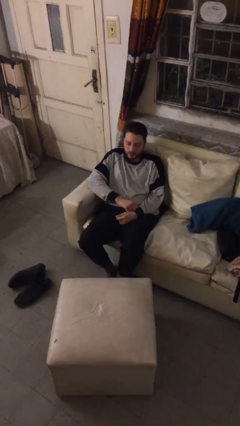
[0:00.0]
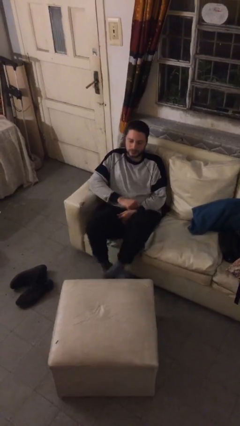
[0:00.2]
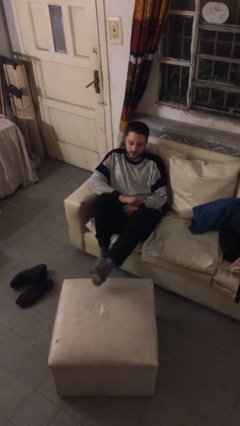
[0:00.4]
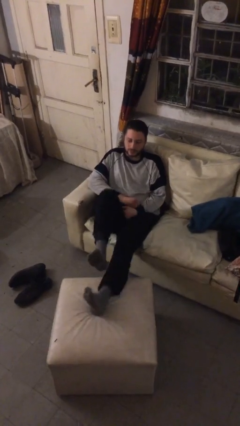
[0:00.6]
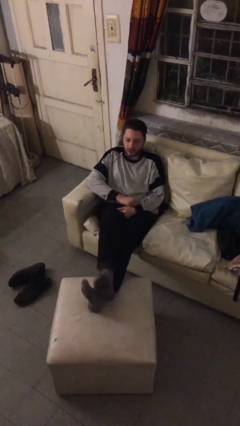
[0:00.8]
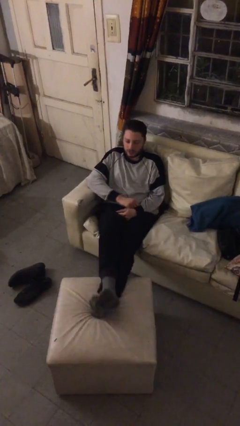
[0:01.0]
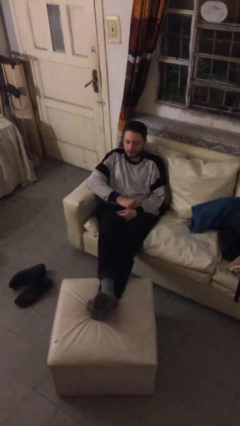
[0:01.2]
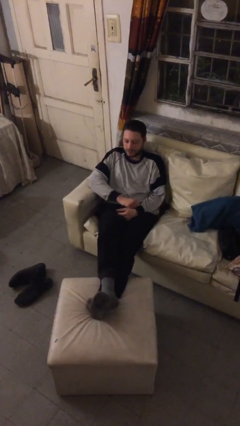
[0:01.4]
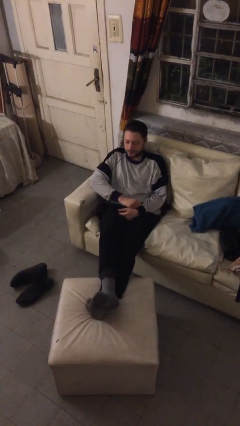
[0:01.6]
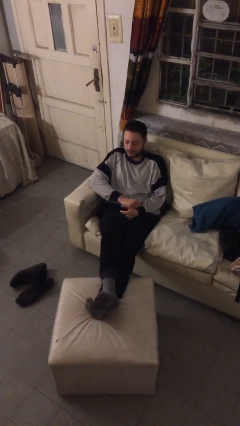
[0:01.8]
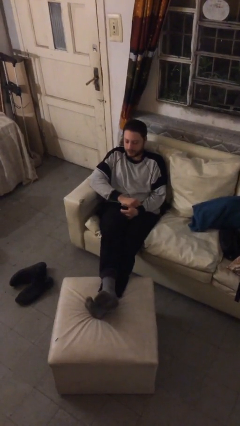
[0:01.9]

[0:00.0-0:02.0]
person puts feet up

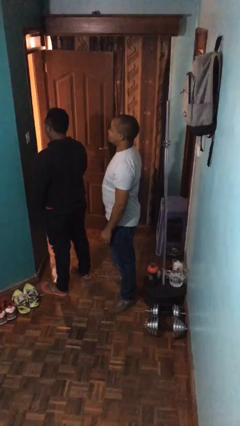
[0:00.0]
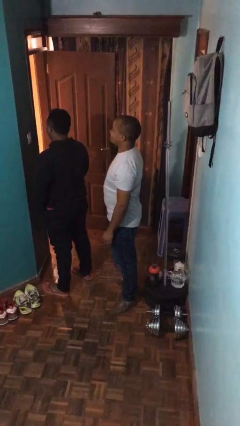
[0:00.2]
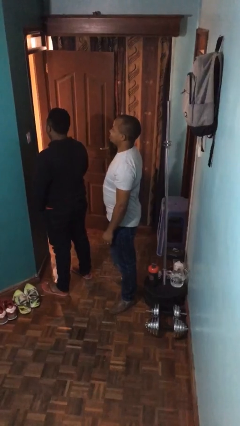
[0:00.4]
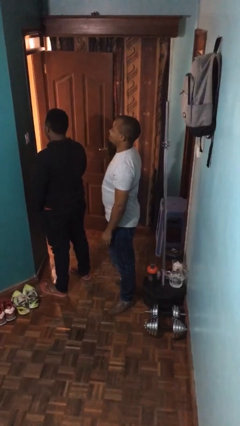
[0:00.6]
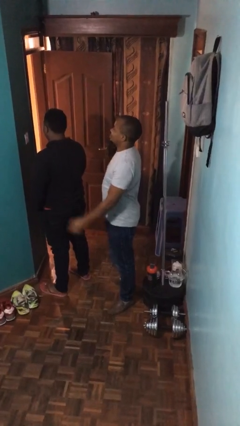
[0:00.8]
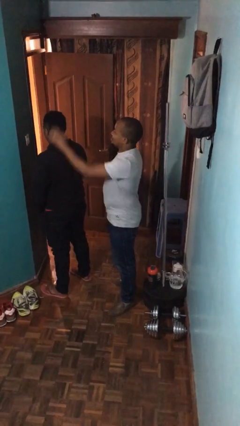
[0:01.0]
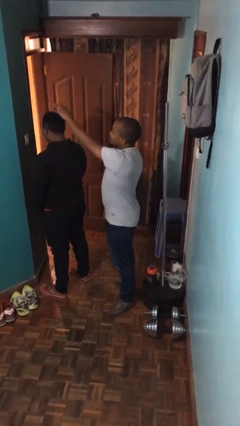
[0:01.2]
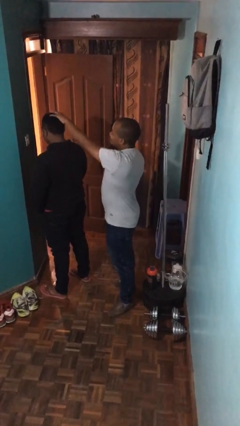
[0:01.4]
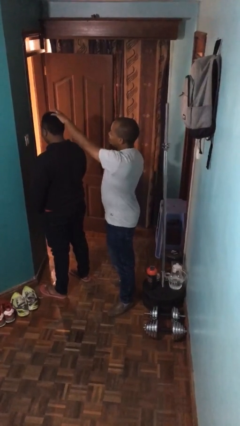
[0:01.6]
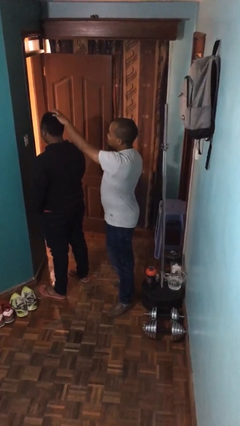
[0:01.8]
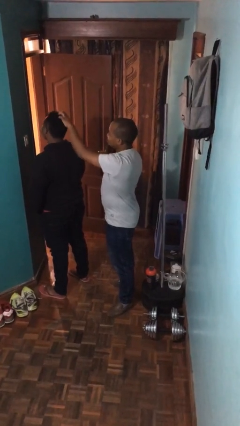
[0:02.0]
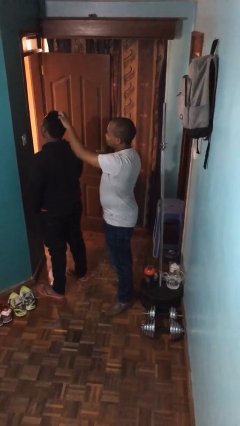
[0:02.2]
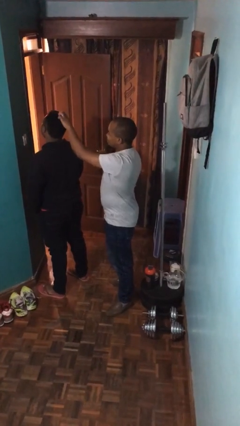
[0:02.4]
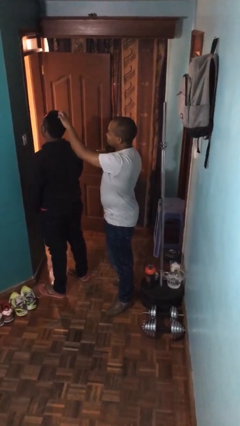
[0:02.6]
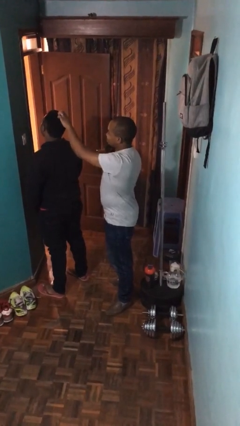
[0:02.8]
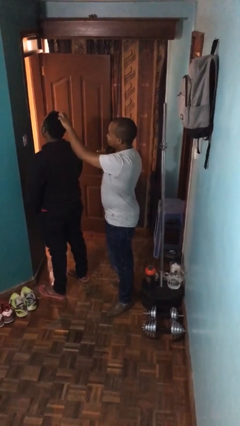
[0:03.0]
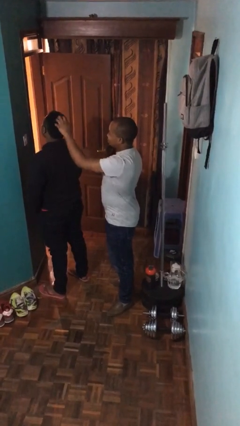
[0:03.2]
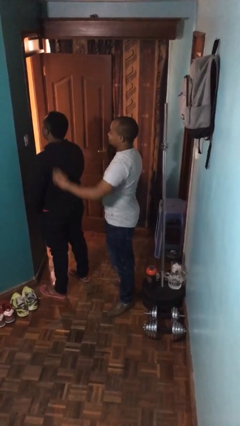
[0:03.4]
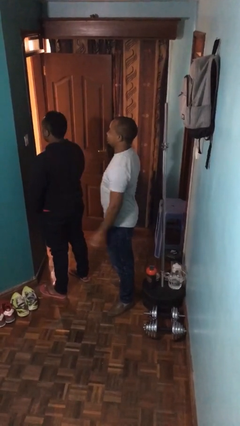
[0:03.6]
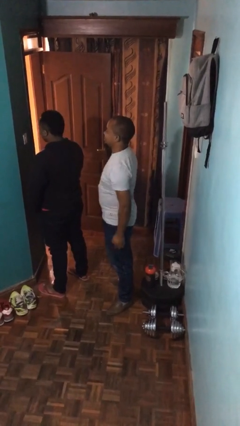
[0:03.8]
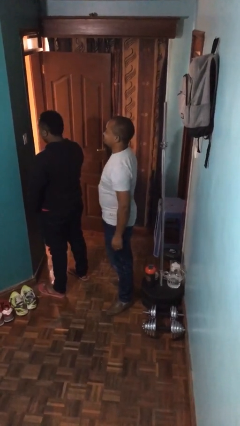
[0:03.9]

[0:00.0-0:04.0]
person grabs person by hair

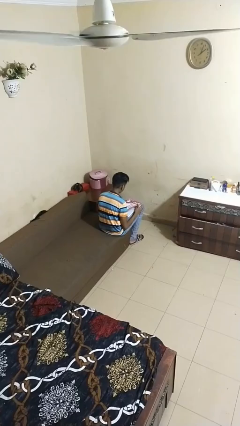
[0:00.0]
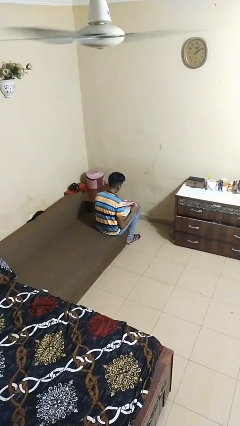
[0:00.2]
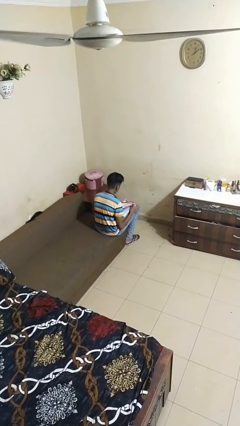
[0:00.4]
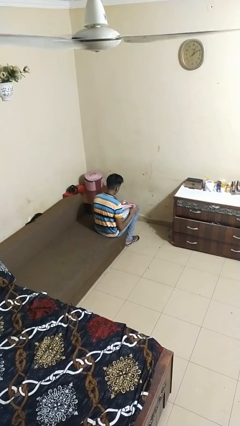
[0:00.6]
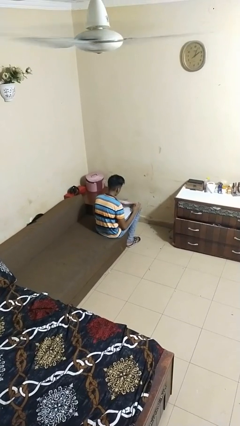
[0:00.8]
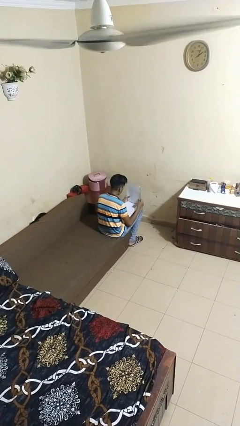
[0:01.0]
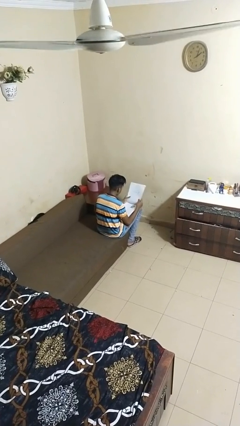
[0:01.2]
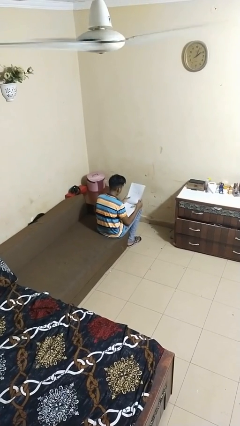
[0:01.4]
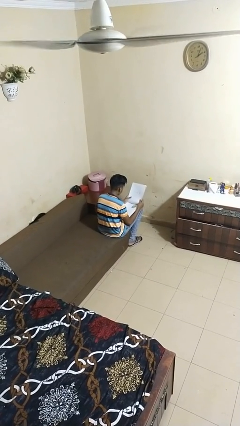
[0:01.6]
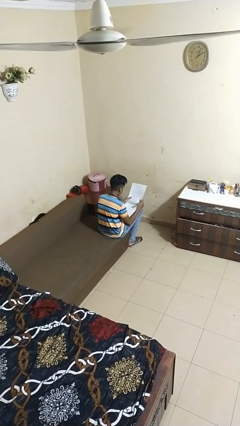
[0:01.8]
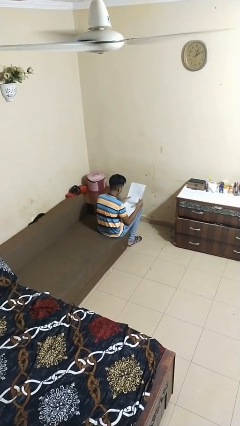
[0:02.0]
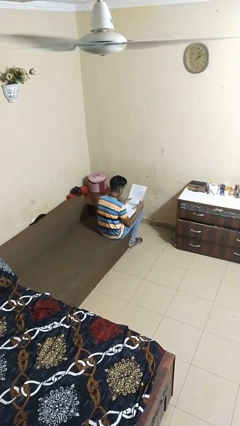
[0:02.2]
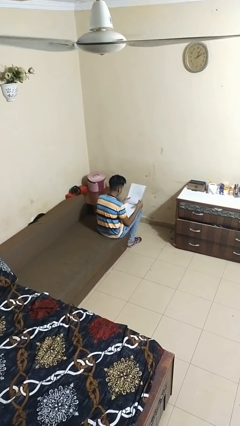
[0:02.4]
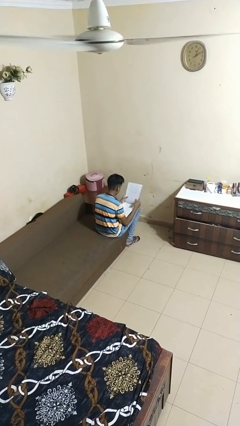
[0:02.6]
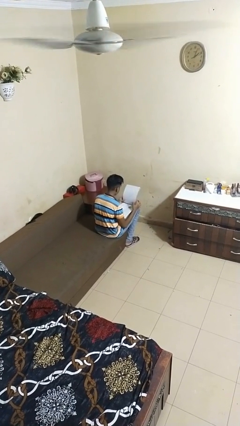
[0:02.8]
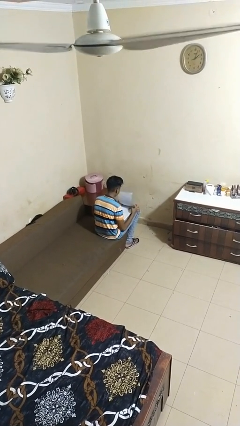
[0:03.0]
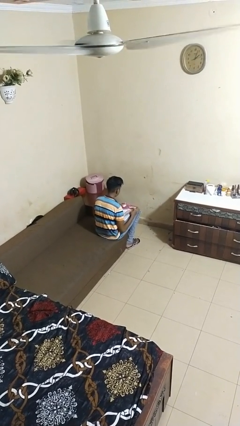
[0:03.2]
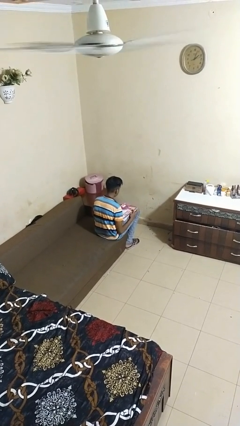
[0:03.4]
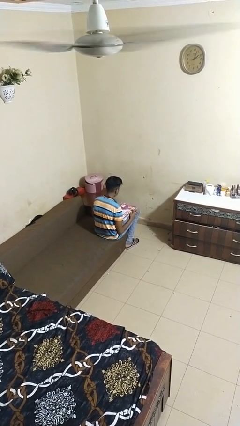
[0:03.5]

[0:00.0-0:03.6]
person reads magazine

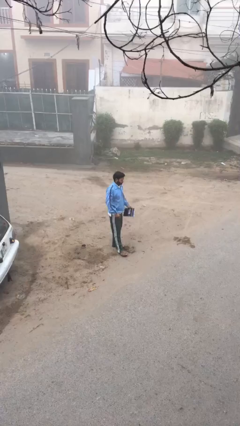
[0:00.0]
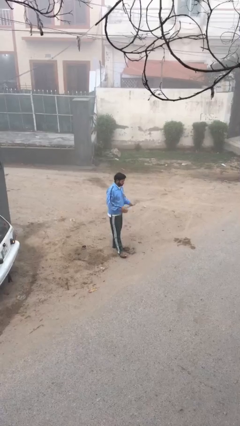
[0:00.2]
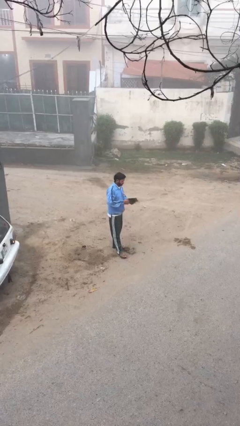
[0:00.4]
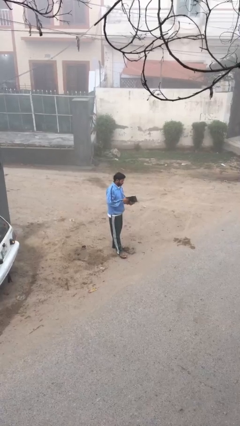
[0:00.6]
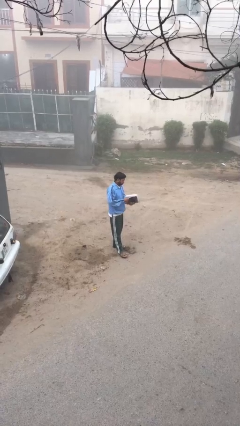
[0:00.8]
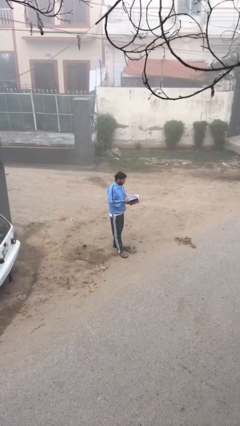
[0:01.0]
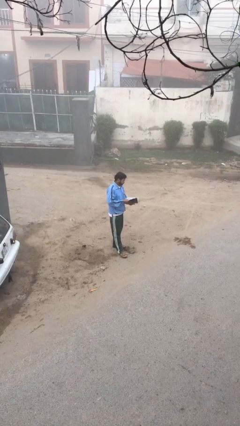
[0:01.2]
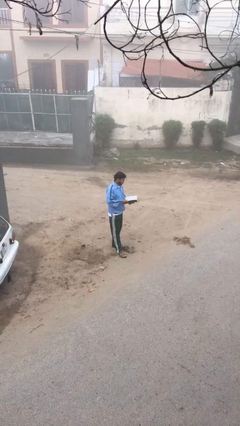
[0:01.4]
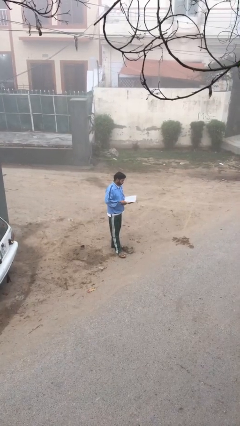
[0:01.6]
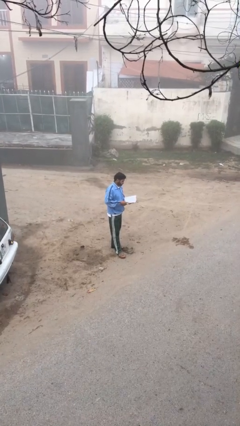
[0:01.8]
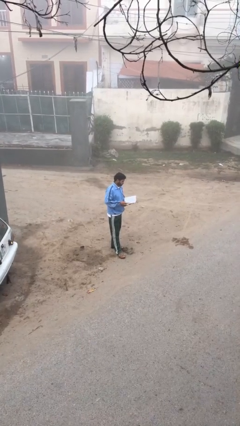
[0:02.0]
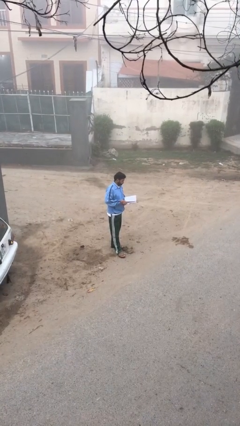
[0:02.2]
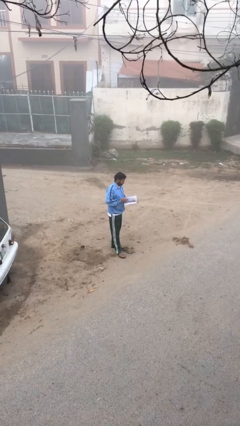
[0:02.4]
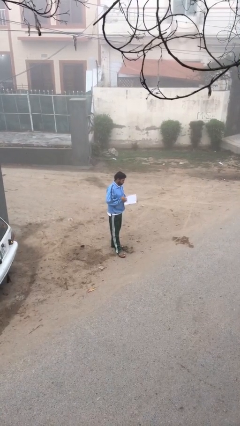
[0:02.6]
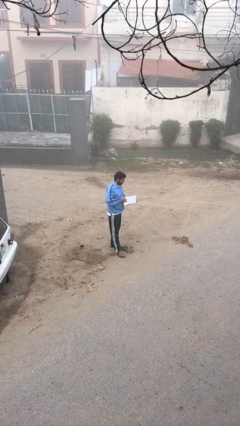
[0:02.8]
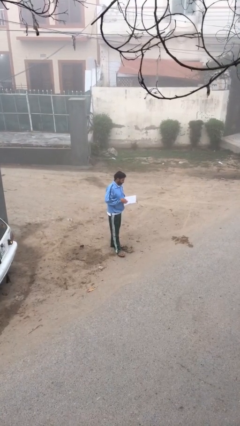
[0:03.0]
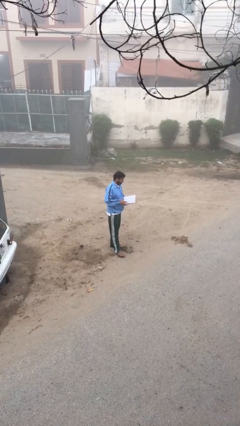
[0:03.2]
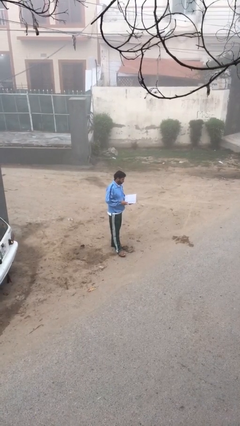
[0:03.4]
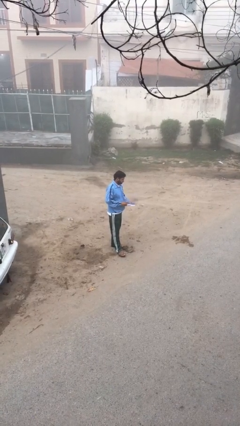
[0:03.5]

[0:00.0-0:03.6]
person reads document

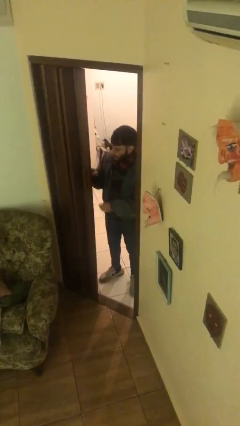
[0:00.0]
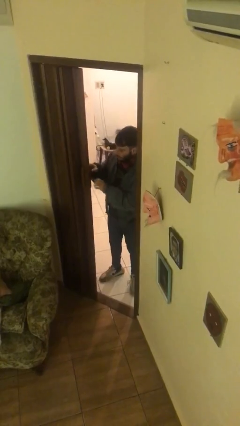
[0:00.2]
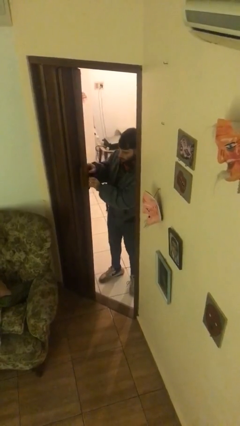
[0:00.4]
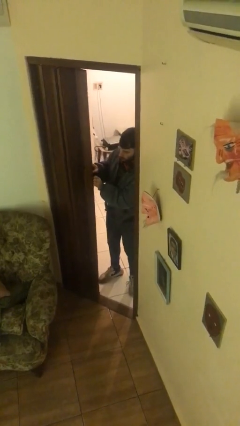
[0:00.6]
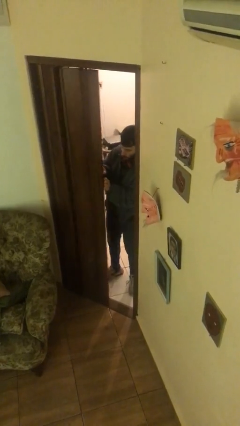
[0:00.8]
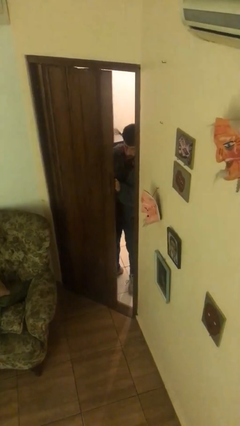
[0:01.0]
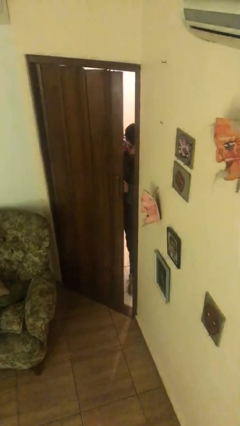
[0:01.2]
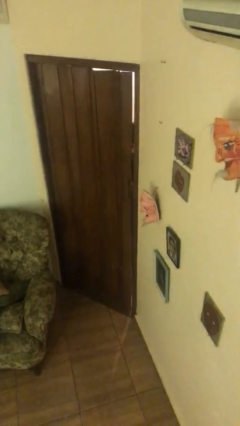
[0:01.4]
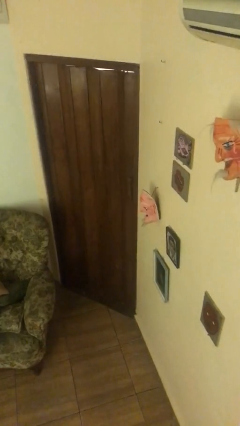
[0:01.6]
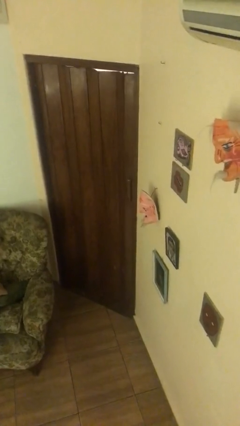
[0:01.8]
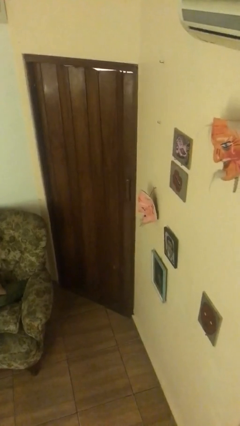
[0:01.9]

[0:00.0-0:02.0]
person closes sliding door

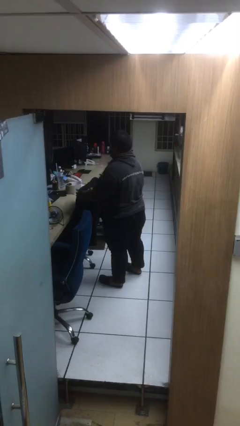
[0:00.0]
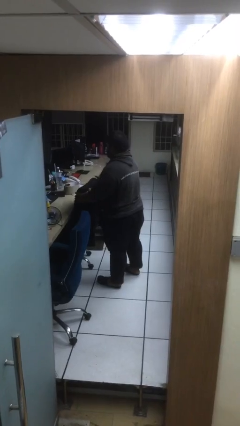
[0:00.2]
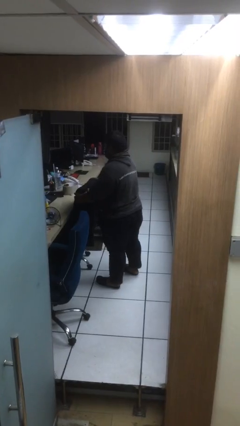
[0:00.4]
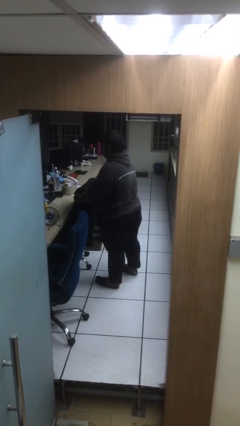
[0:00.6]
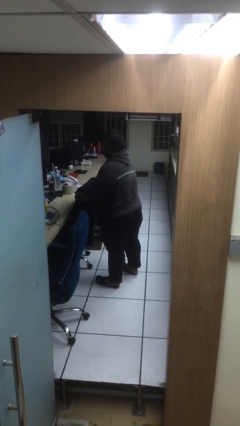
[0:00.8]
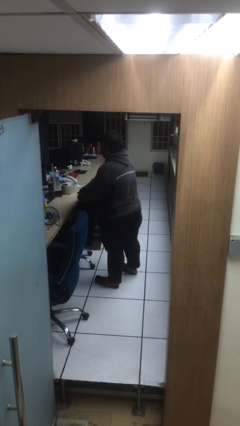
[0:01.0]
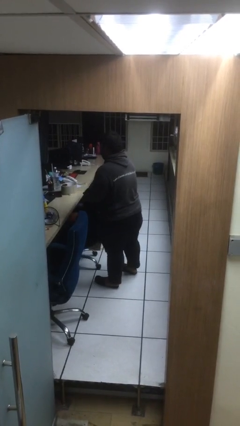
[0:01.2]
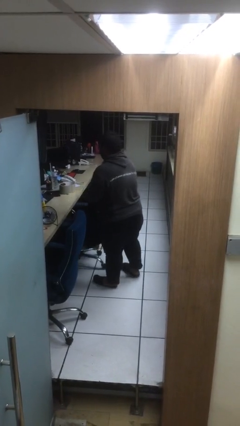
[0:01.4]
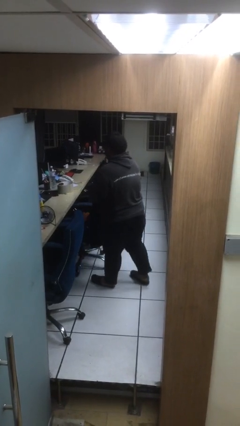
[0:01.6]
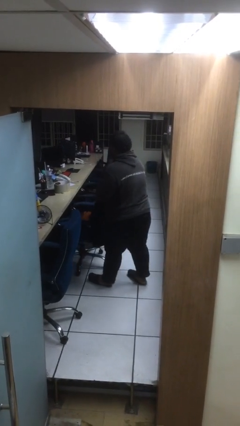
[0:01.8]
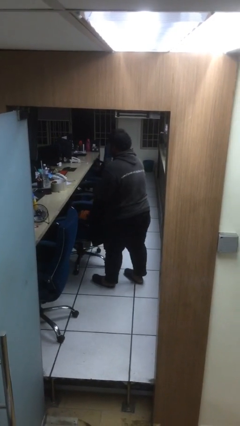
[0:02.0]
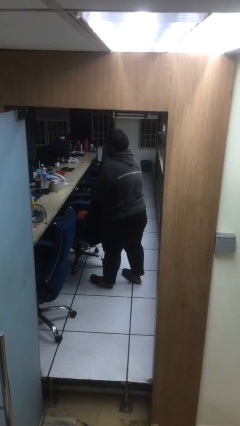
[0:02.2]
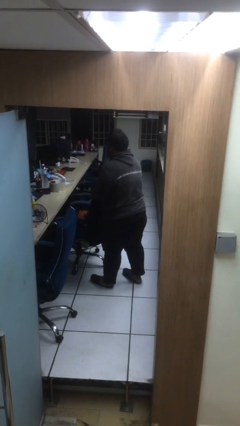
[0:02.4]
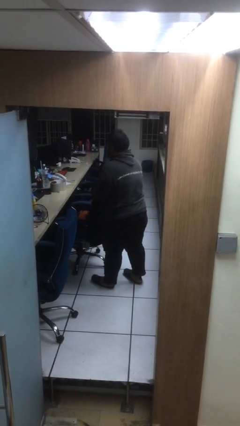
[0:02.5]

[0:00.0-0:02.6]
person pulls out chair
